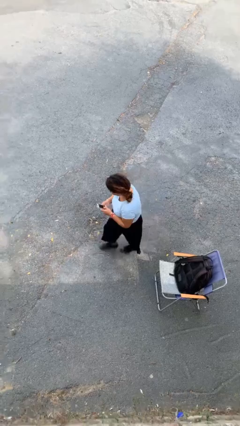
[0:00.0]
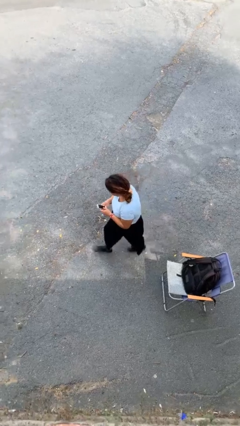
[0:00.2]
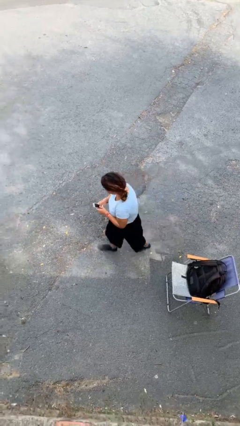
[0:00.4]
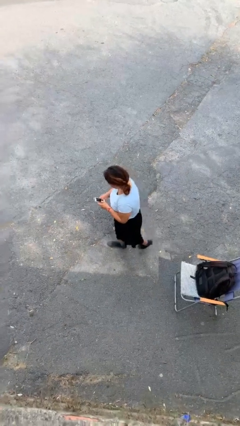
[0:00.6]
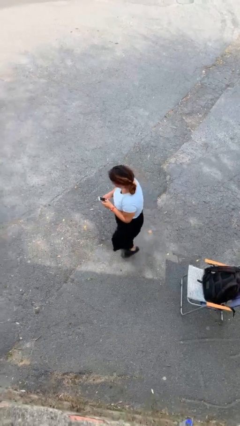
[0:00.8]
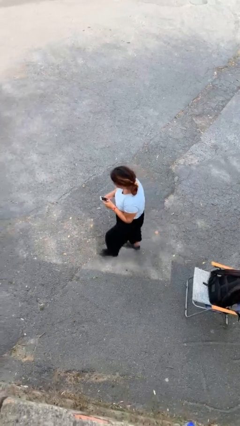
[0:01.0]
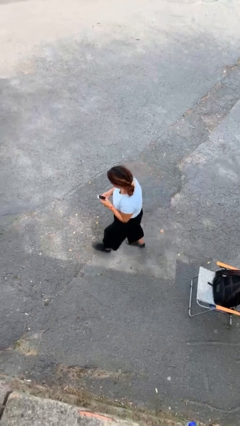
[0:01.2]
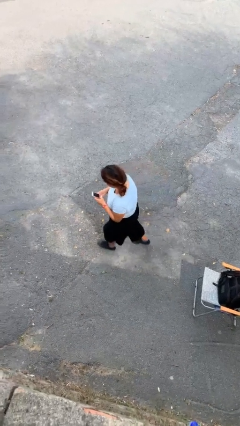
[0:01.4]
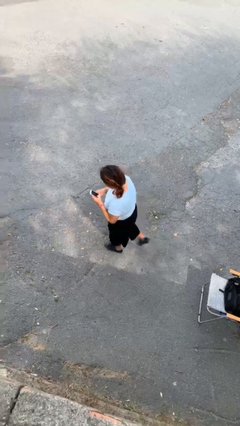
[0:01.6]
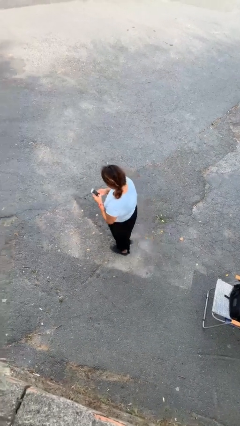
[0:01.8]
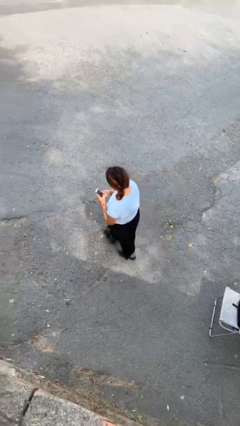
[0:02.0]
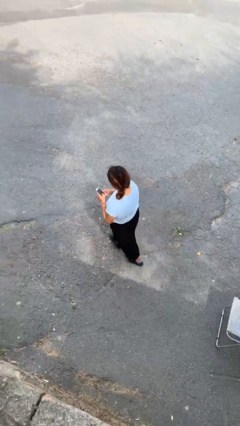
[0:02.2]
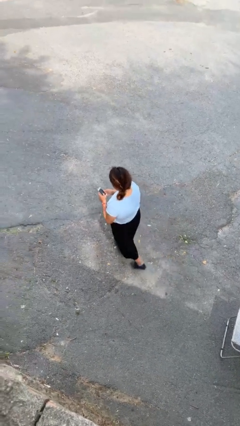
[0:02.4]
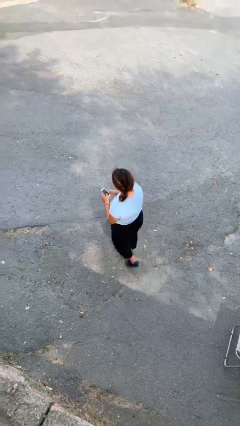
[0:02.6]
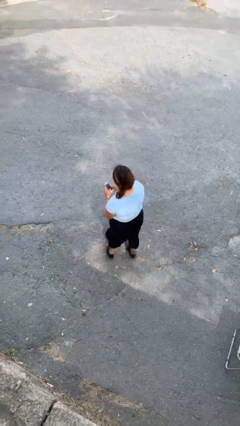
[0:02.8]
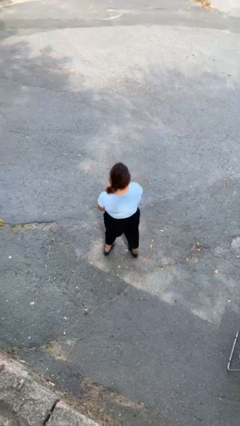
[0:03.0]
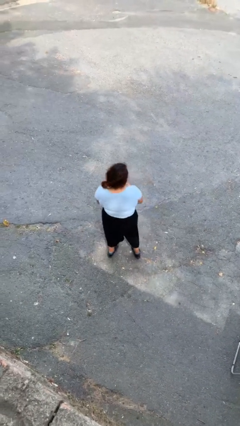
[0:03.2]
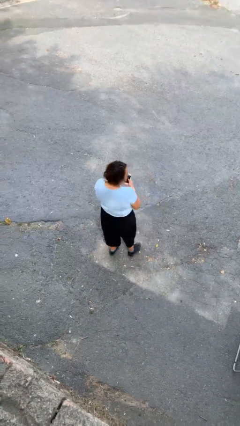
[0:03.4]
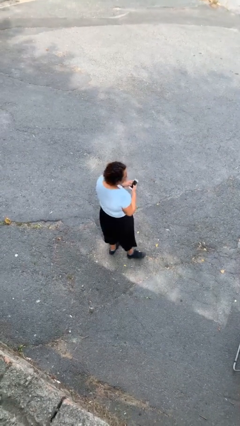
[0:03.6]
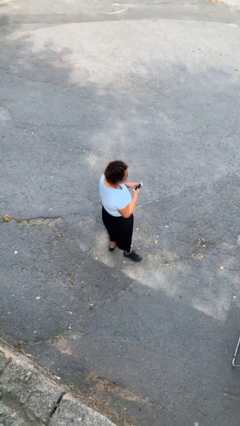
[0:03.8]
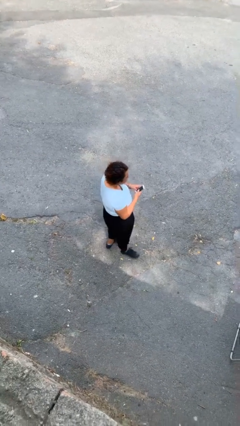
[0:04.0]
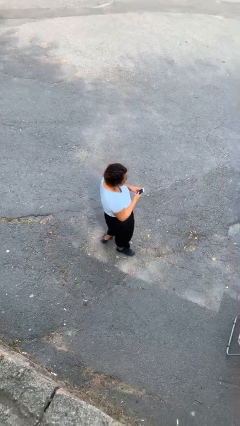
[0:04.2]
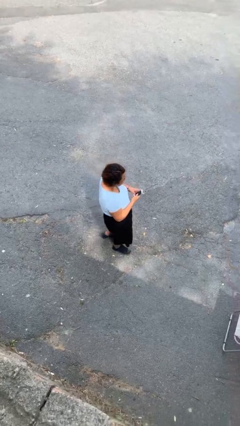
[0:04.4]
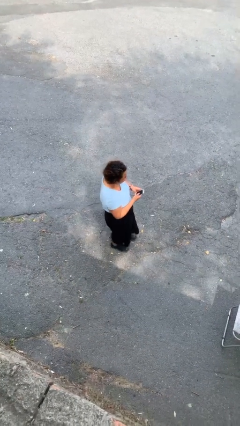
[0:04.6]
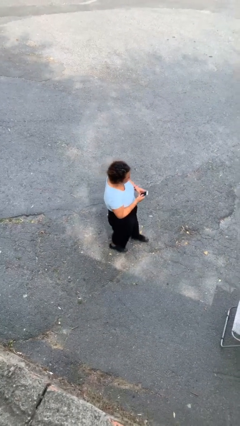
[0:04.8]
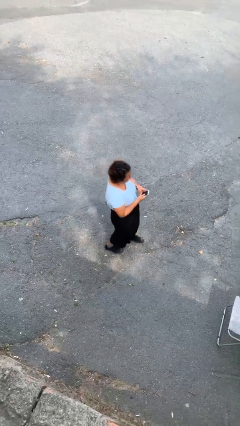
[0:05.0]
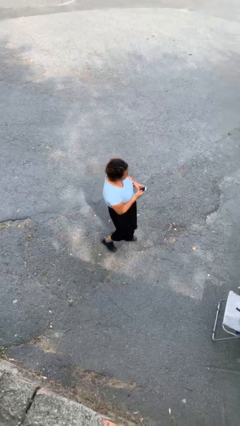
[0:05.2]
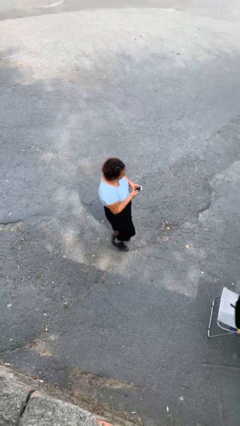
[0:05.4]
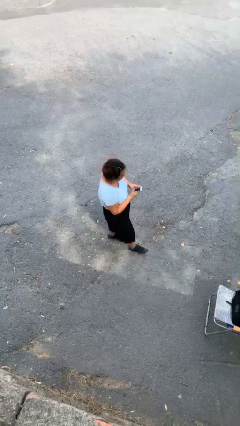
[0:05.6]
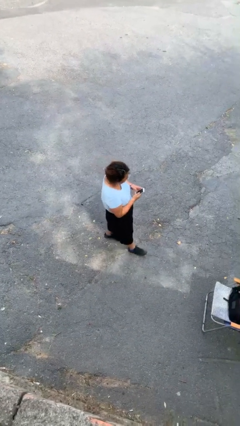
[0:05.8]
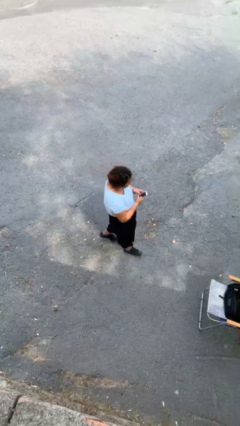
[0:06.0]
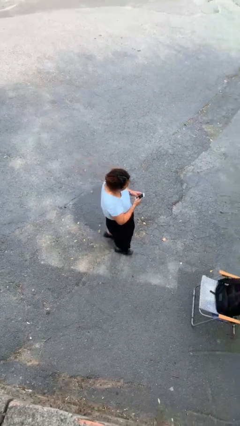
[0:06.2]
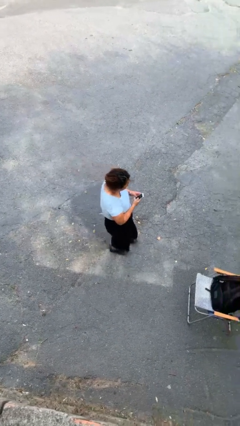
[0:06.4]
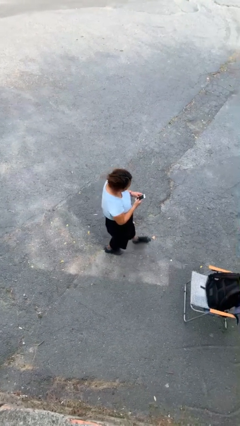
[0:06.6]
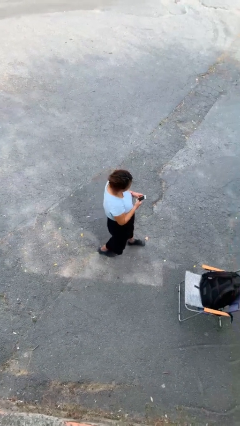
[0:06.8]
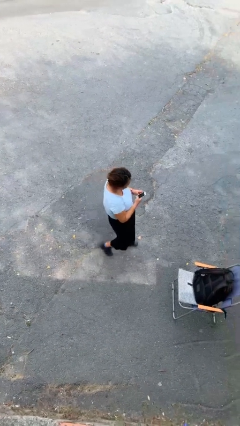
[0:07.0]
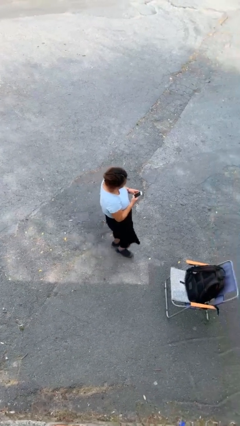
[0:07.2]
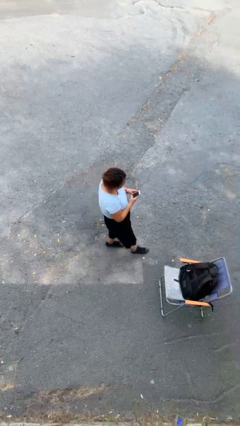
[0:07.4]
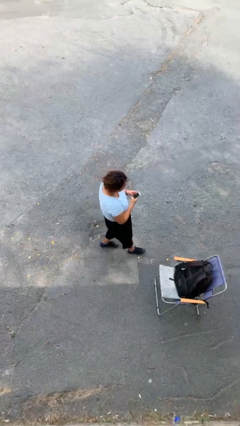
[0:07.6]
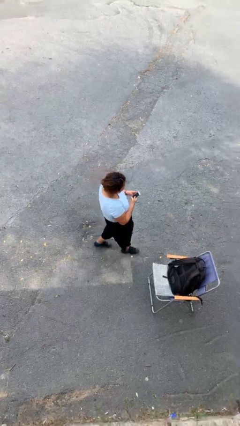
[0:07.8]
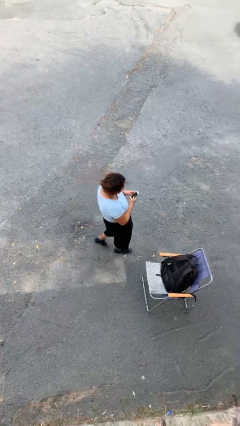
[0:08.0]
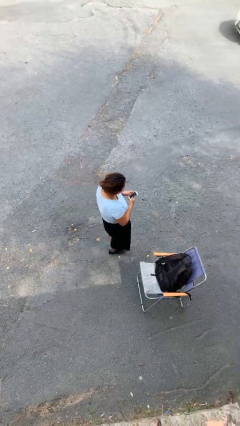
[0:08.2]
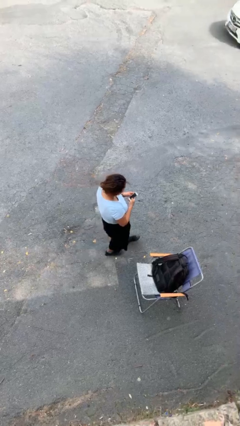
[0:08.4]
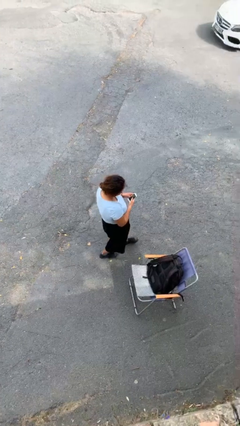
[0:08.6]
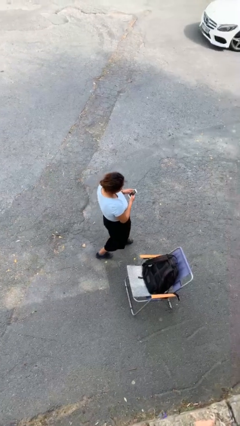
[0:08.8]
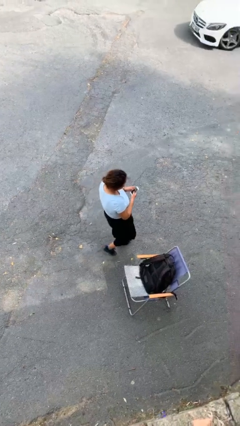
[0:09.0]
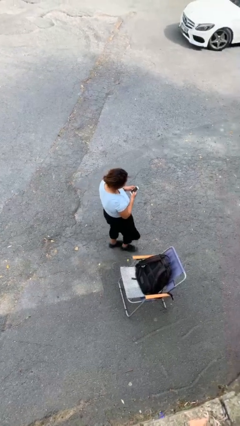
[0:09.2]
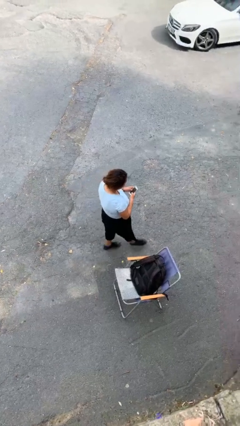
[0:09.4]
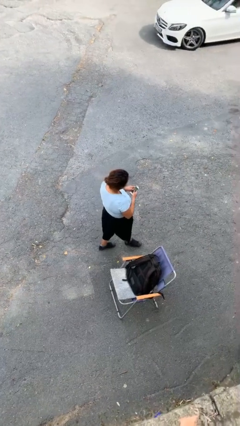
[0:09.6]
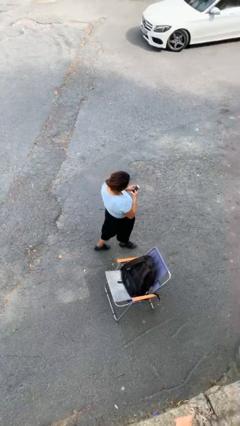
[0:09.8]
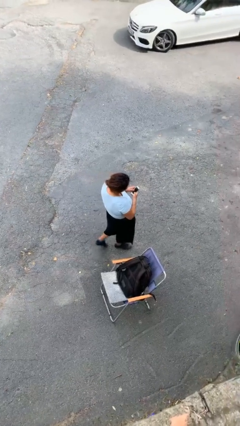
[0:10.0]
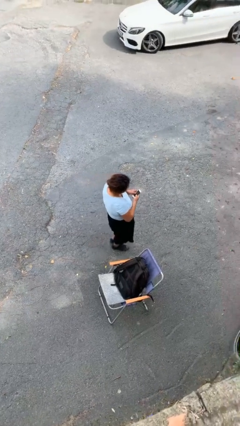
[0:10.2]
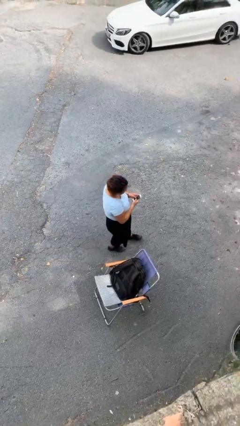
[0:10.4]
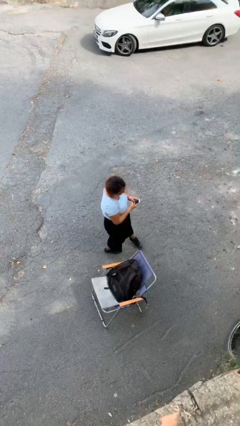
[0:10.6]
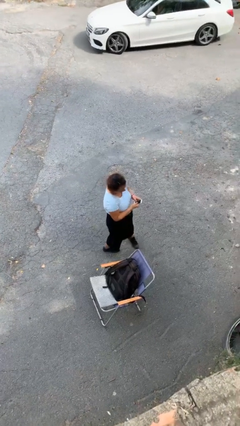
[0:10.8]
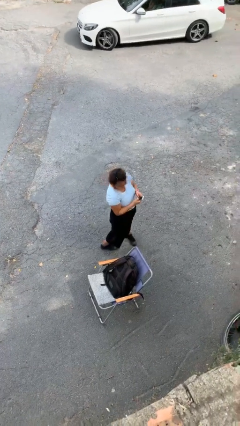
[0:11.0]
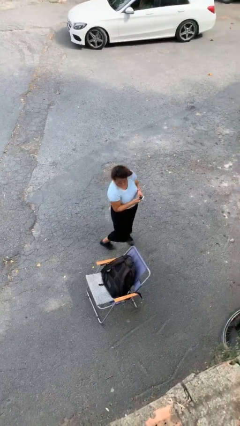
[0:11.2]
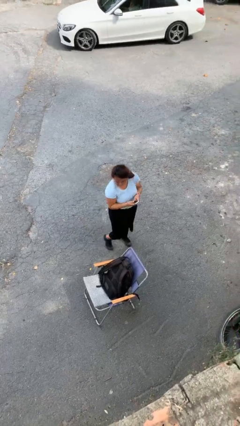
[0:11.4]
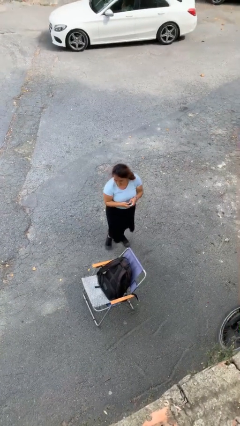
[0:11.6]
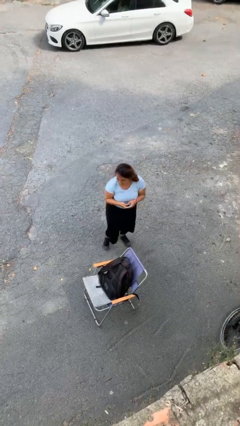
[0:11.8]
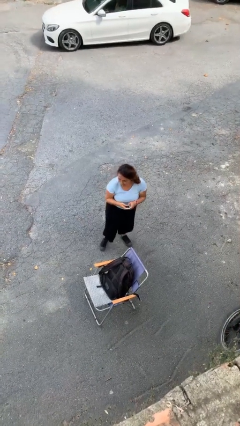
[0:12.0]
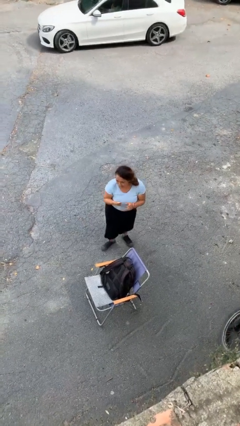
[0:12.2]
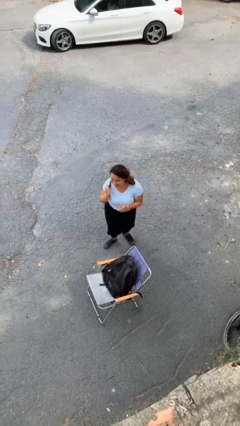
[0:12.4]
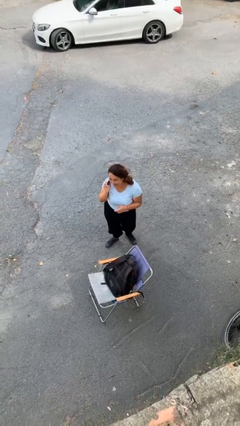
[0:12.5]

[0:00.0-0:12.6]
person texts on phone

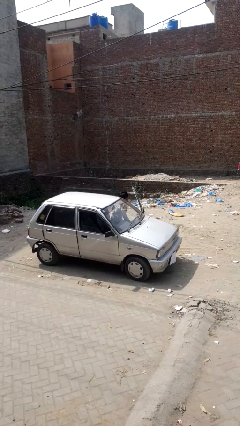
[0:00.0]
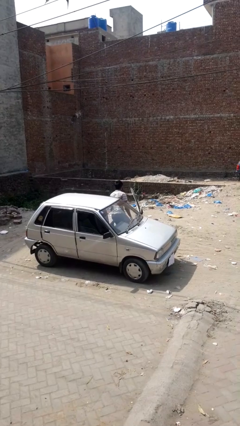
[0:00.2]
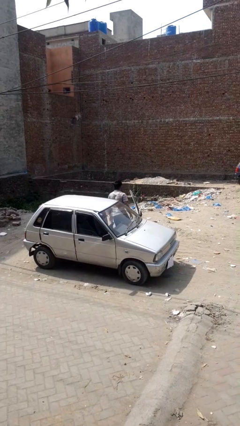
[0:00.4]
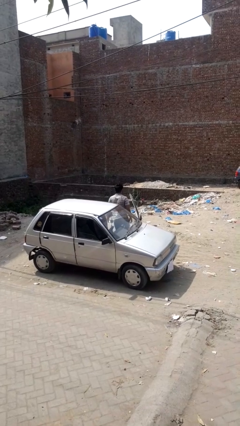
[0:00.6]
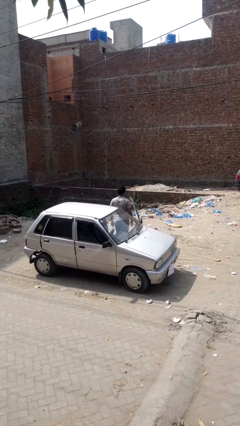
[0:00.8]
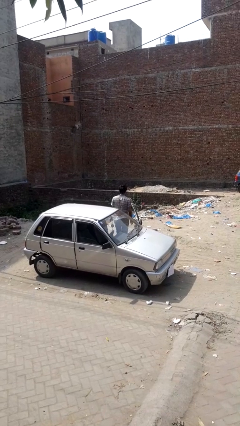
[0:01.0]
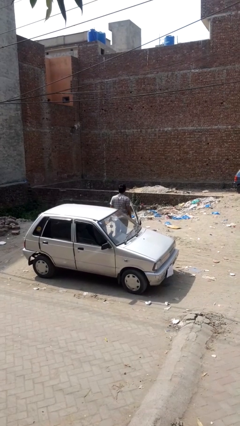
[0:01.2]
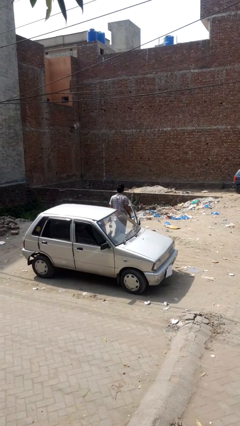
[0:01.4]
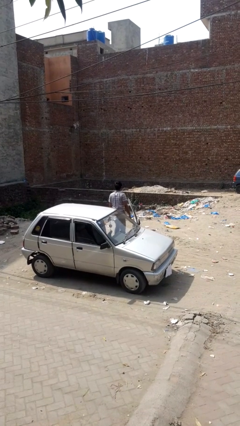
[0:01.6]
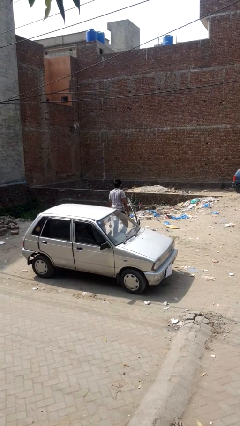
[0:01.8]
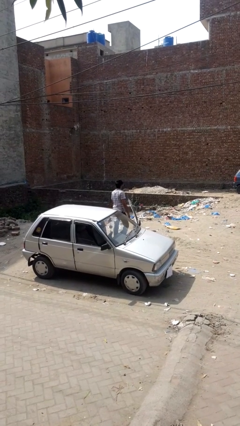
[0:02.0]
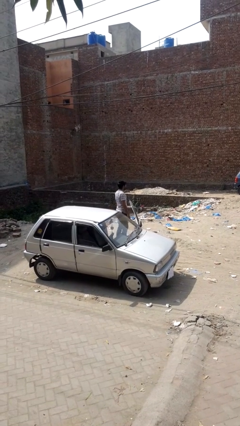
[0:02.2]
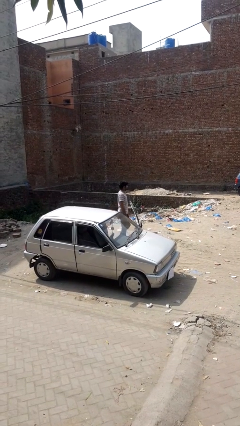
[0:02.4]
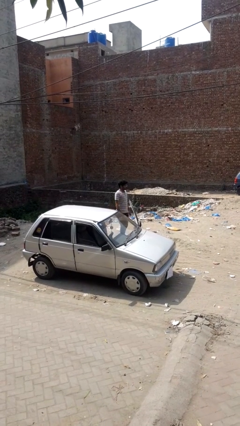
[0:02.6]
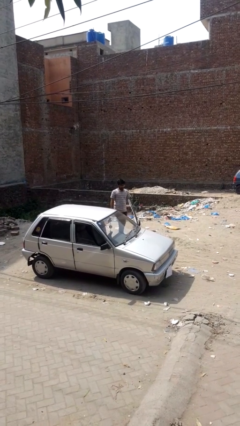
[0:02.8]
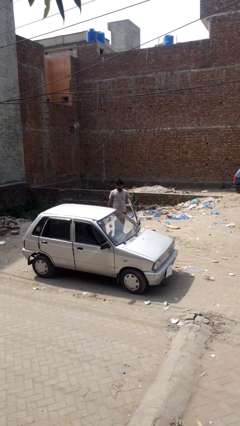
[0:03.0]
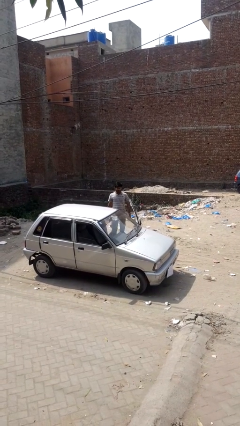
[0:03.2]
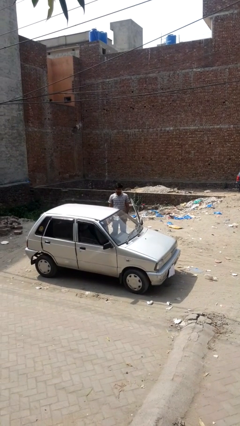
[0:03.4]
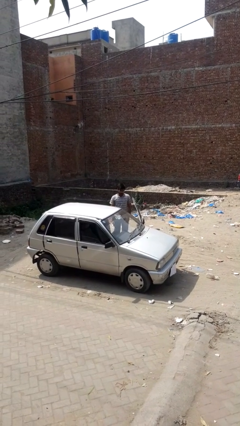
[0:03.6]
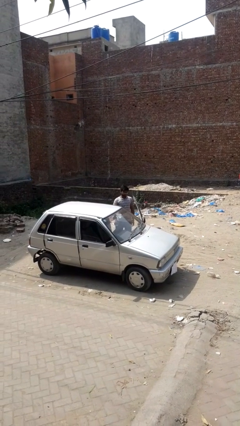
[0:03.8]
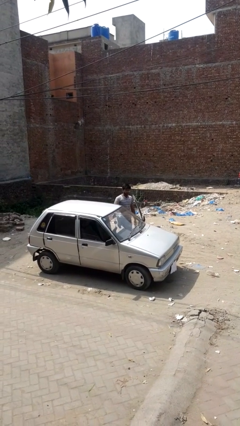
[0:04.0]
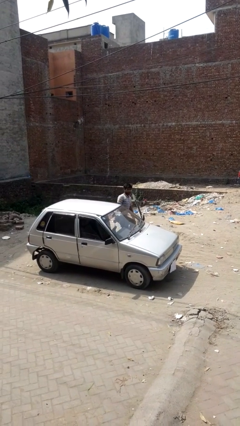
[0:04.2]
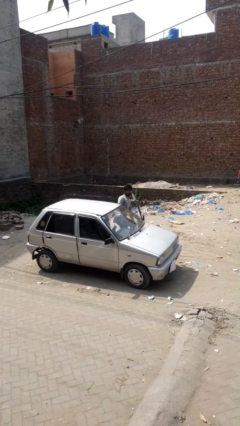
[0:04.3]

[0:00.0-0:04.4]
person exits car

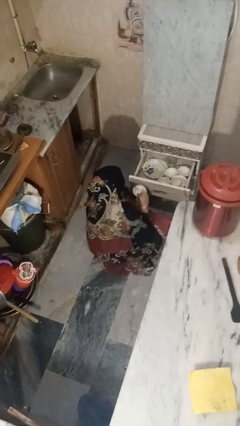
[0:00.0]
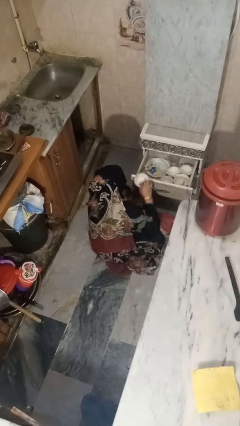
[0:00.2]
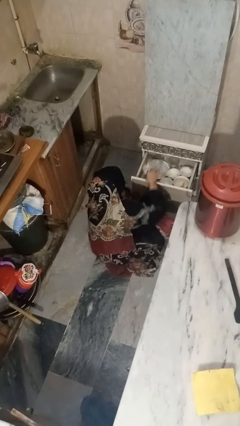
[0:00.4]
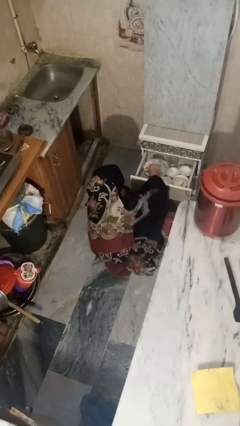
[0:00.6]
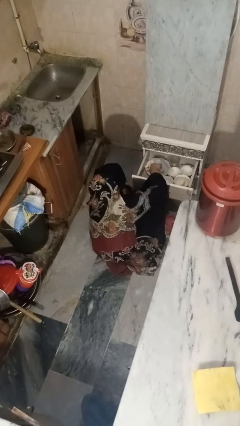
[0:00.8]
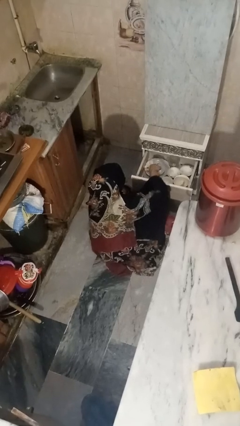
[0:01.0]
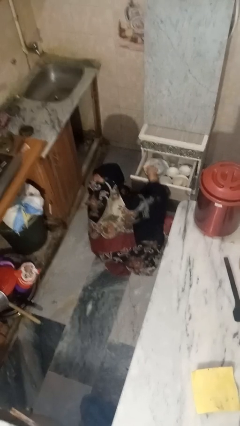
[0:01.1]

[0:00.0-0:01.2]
person puts object into kitchen drawer
